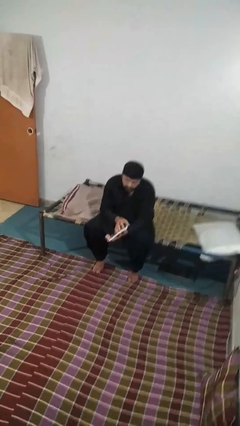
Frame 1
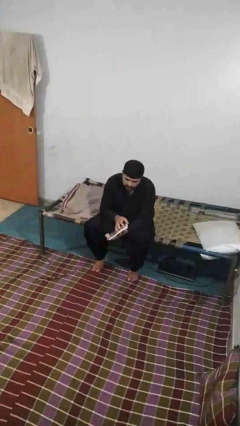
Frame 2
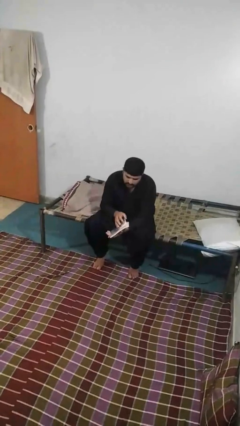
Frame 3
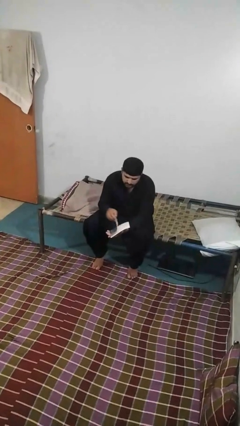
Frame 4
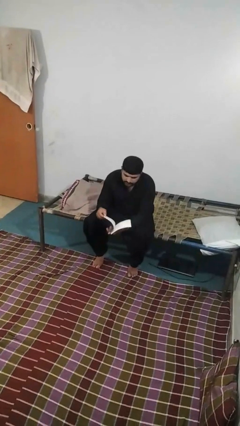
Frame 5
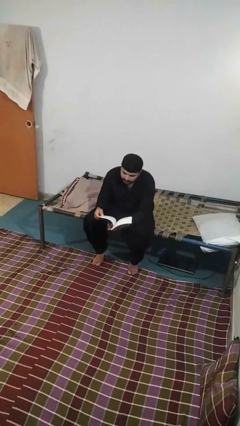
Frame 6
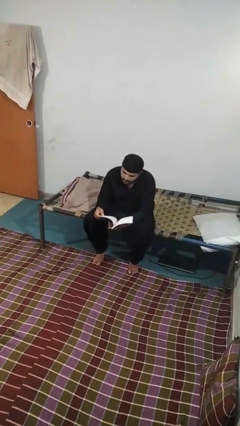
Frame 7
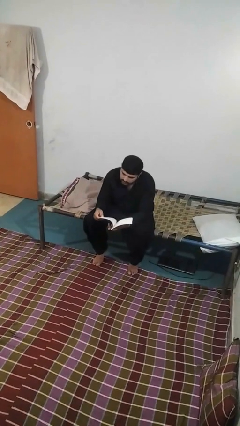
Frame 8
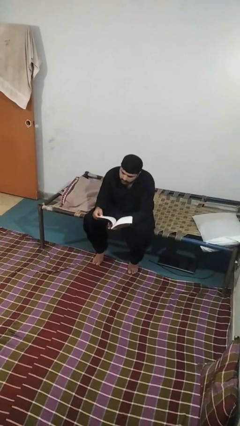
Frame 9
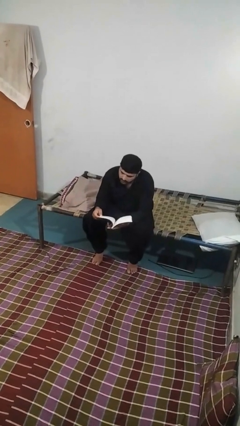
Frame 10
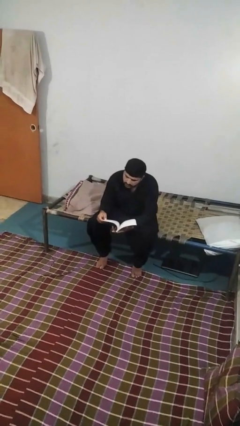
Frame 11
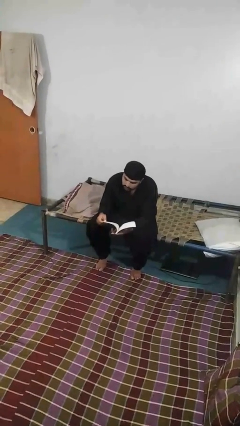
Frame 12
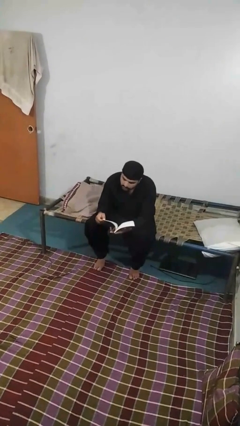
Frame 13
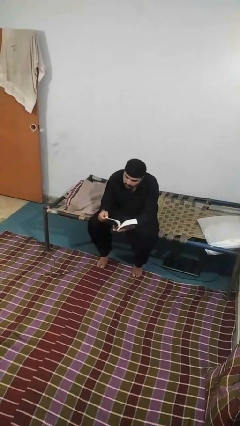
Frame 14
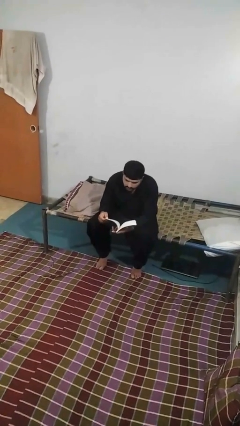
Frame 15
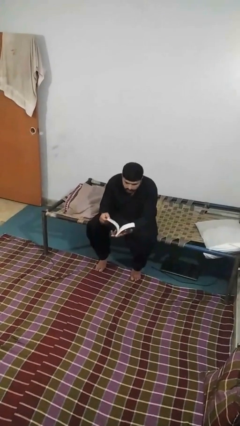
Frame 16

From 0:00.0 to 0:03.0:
person reads book

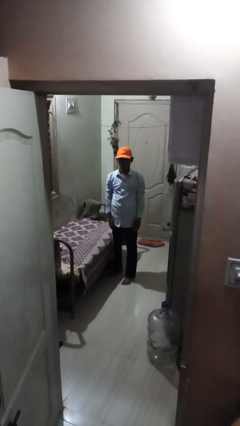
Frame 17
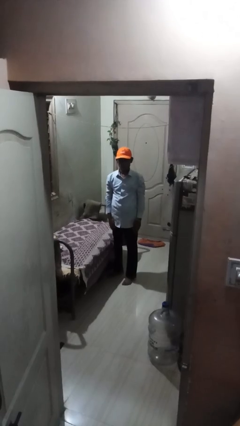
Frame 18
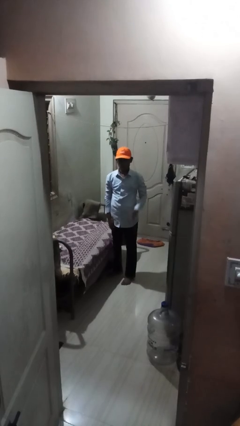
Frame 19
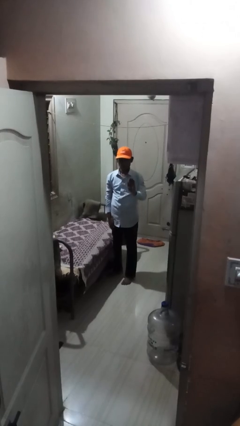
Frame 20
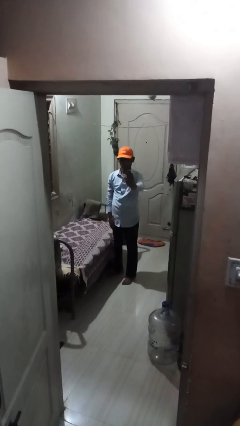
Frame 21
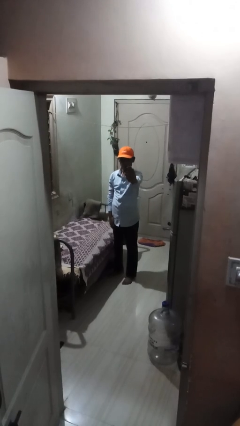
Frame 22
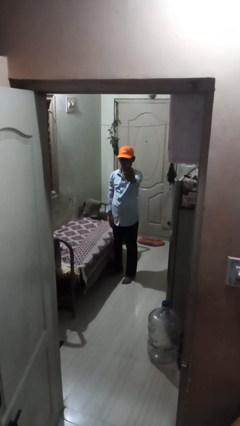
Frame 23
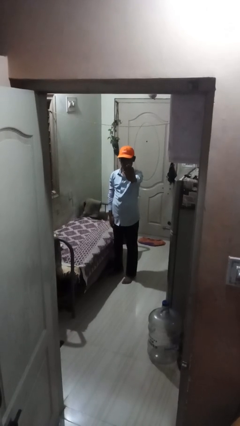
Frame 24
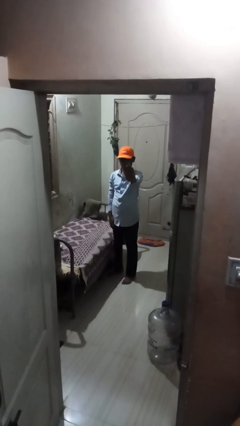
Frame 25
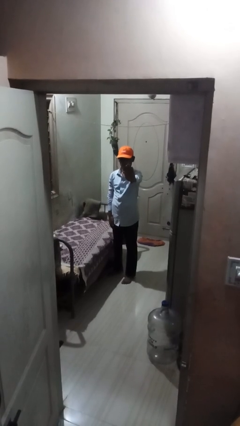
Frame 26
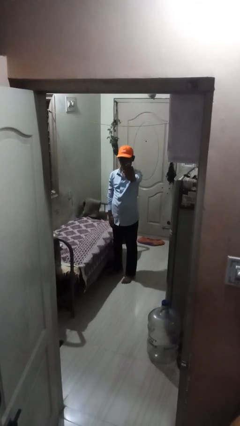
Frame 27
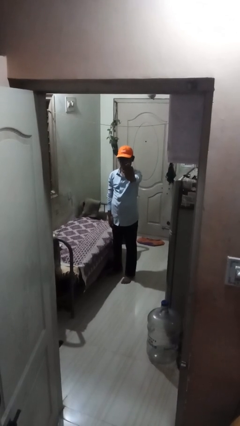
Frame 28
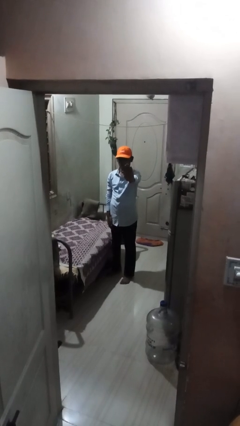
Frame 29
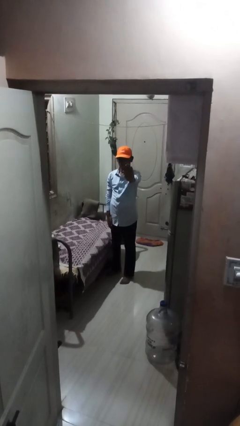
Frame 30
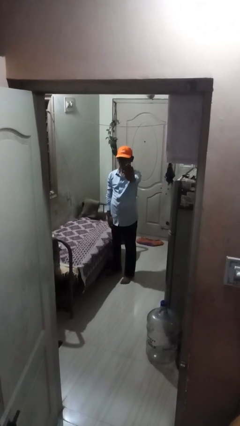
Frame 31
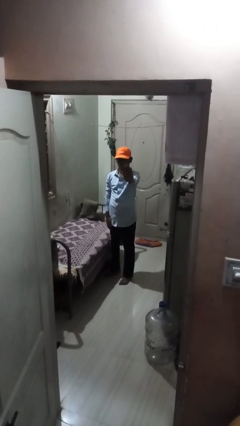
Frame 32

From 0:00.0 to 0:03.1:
person gestures stop

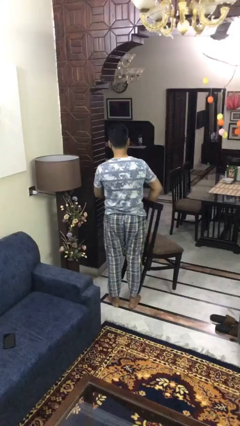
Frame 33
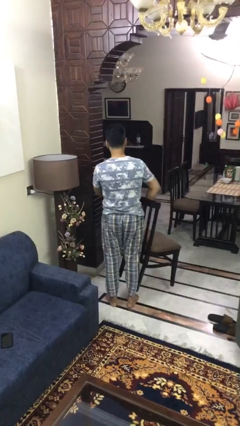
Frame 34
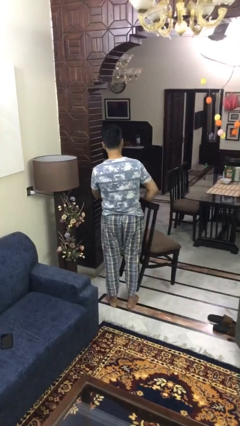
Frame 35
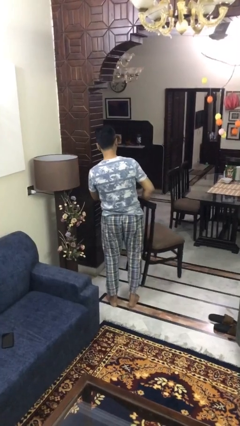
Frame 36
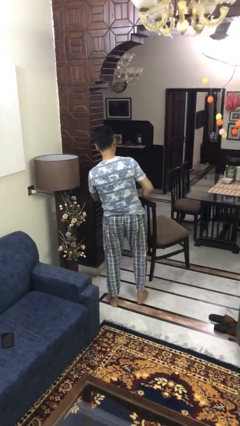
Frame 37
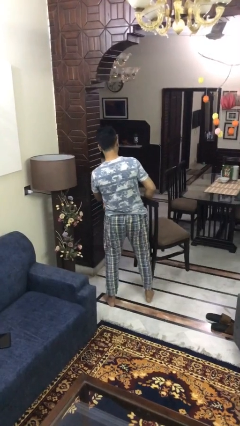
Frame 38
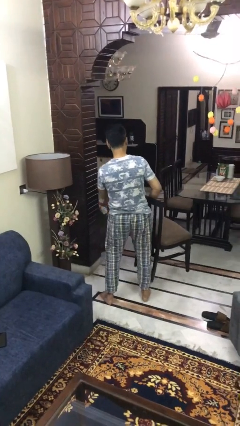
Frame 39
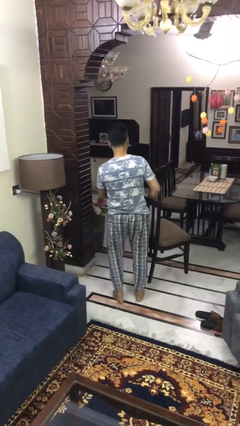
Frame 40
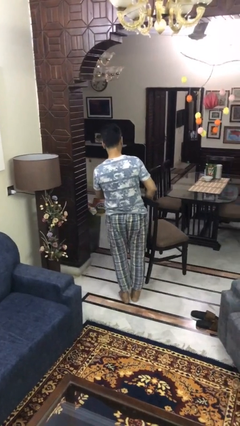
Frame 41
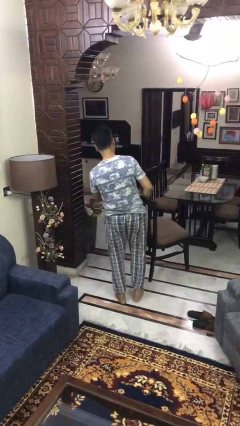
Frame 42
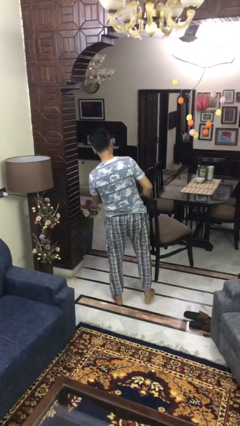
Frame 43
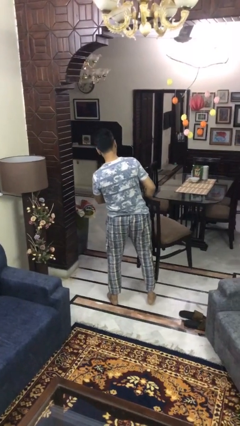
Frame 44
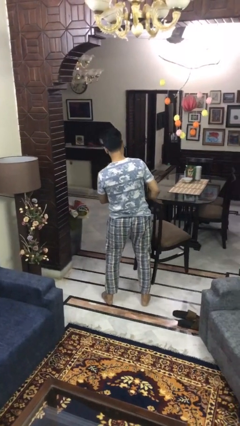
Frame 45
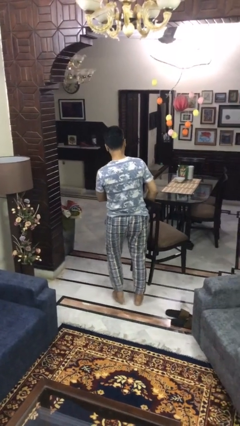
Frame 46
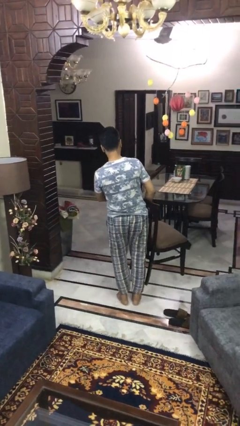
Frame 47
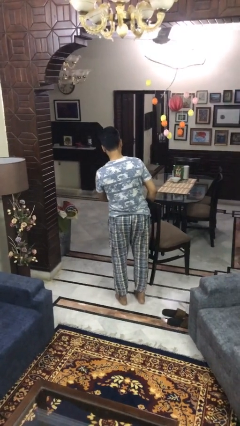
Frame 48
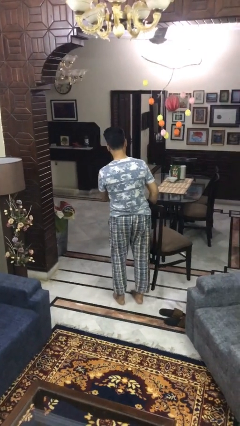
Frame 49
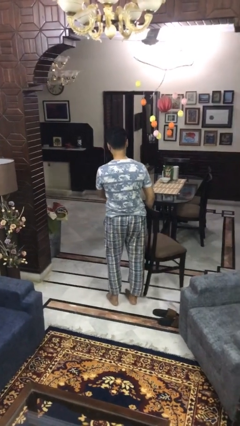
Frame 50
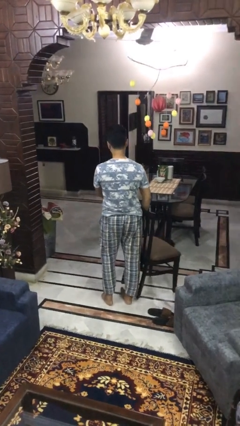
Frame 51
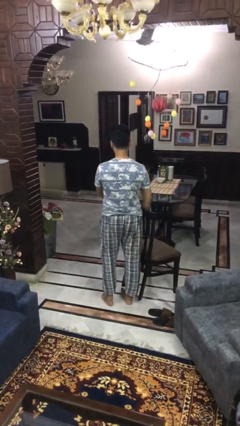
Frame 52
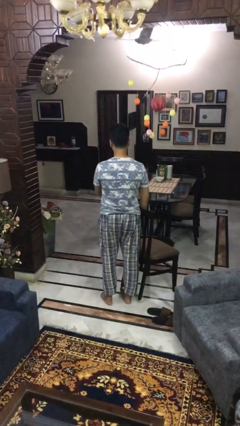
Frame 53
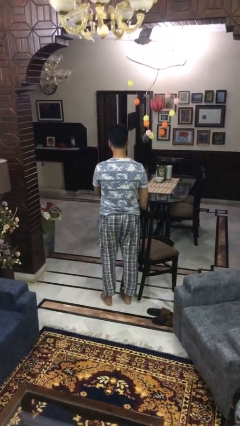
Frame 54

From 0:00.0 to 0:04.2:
person carries furniture

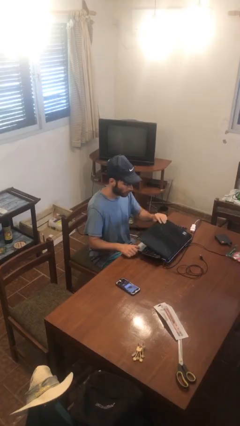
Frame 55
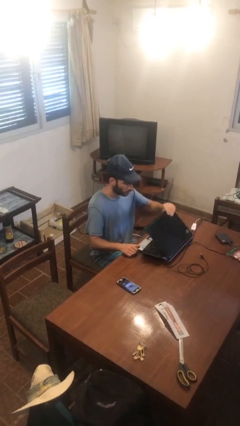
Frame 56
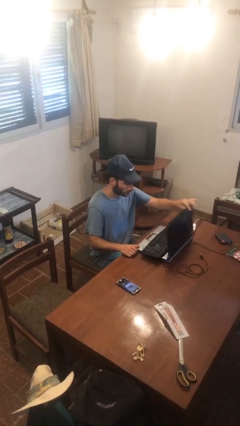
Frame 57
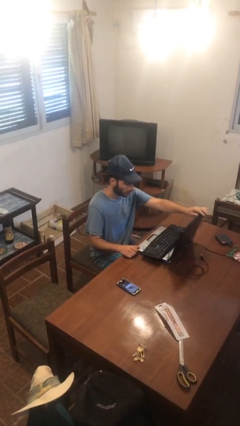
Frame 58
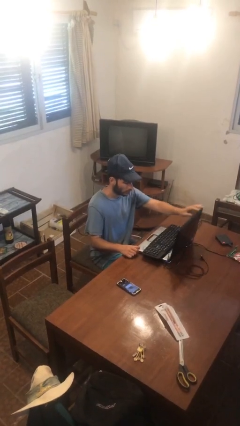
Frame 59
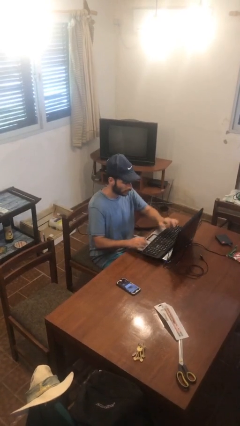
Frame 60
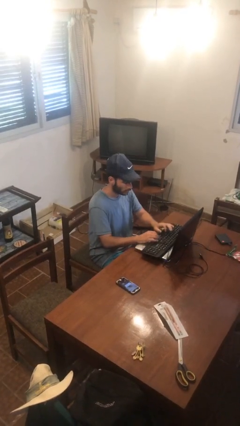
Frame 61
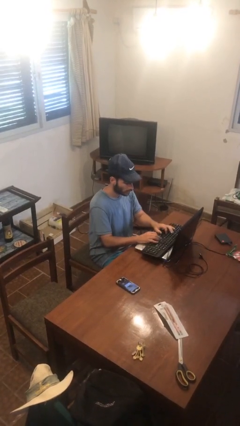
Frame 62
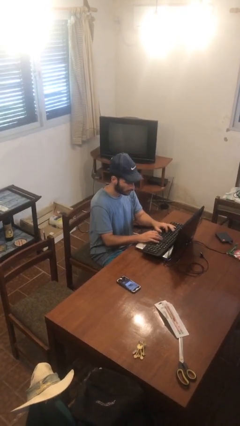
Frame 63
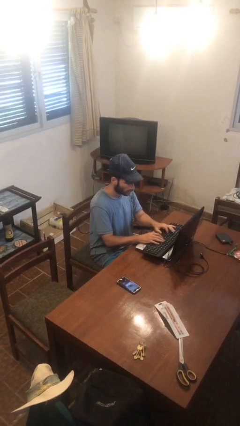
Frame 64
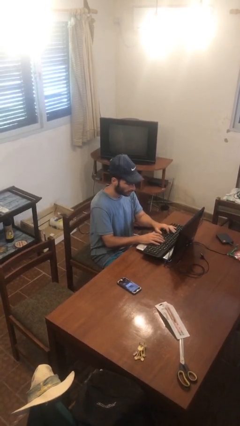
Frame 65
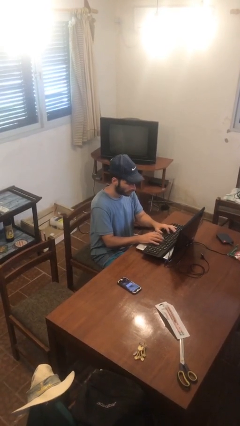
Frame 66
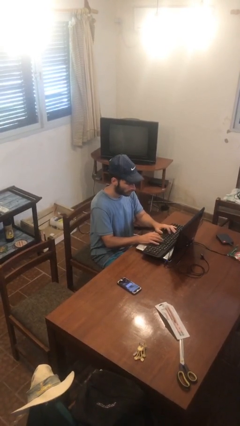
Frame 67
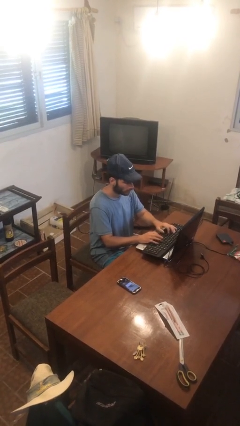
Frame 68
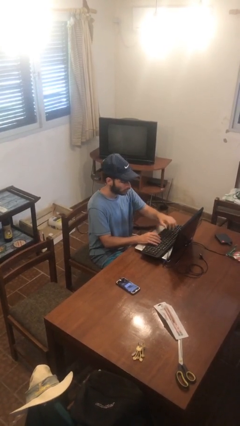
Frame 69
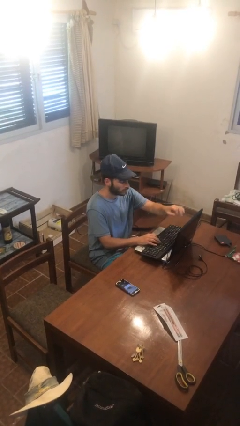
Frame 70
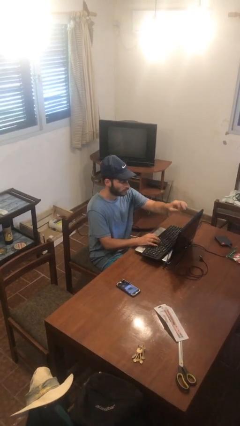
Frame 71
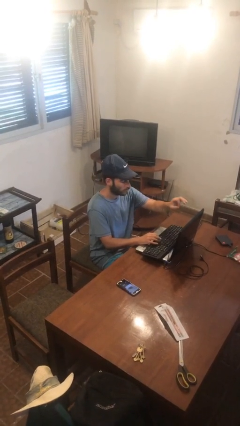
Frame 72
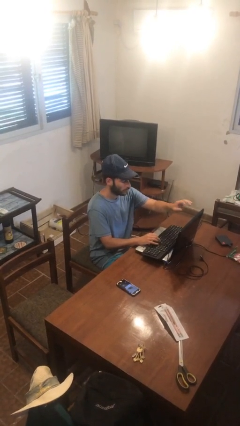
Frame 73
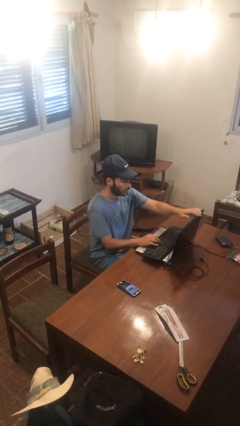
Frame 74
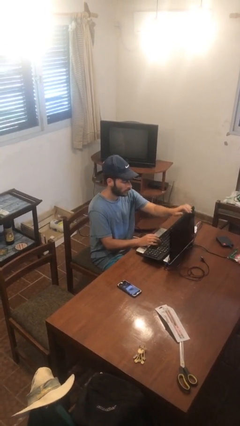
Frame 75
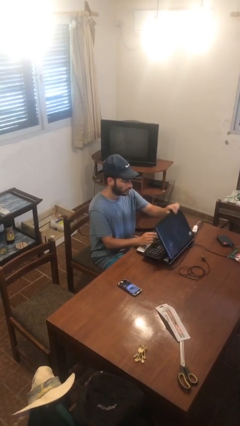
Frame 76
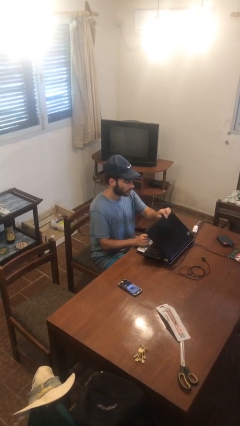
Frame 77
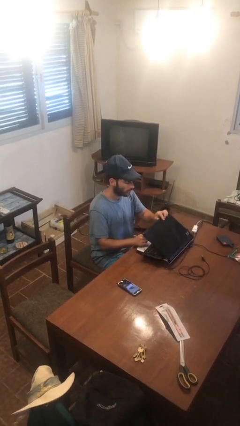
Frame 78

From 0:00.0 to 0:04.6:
person interacts with laptop

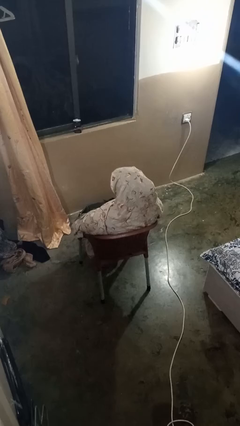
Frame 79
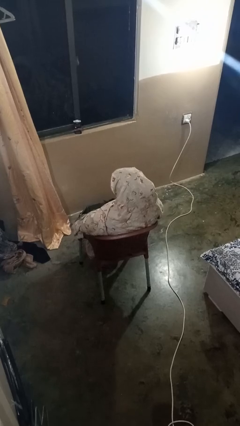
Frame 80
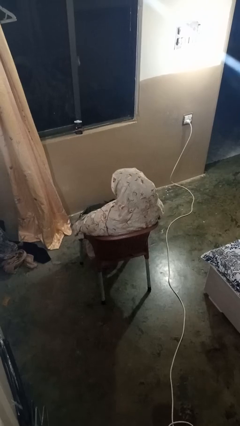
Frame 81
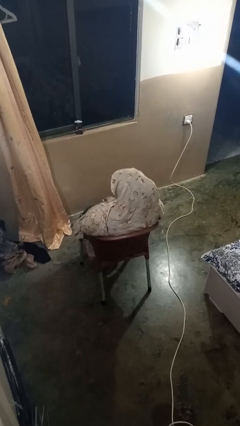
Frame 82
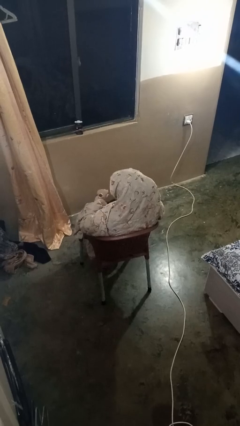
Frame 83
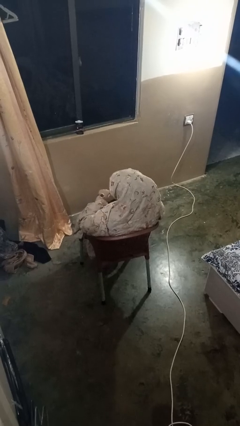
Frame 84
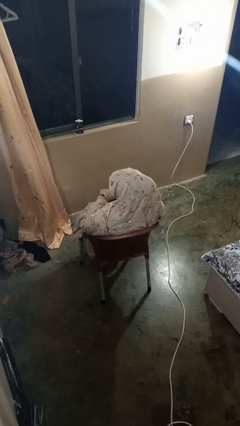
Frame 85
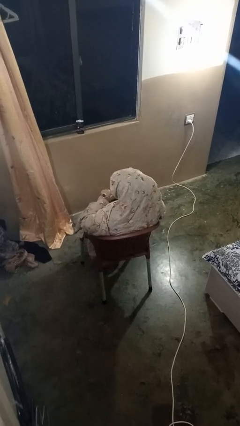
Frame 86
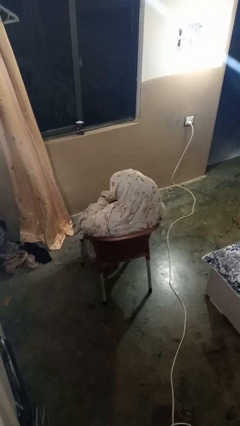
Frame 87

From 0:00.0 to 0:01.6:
person looks at wristwatch

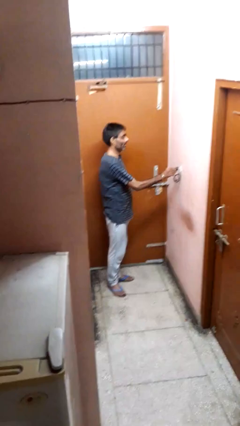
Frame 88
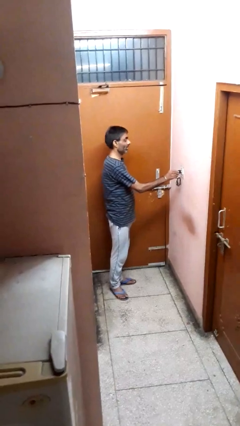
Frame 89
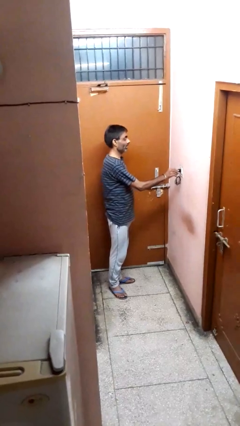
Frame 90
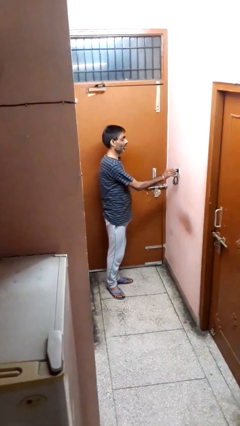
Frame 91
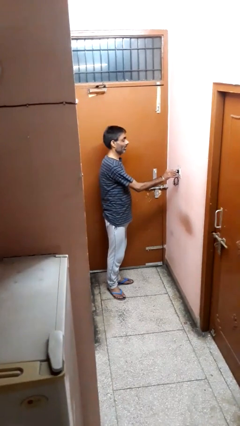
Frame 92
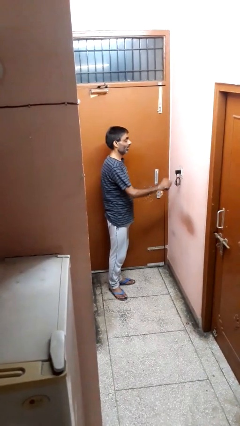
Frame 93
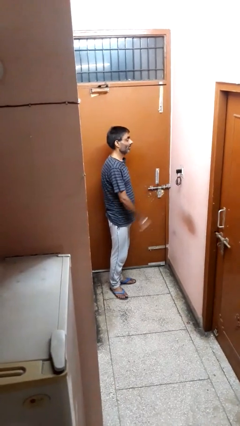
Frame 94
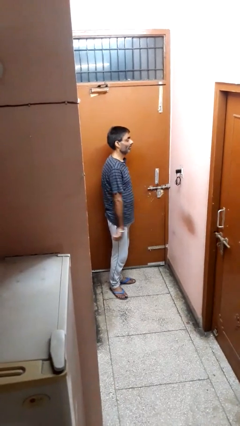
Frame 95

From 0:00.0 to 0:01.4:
person plugs into electrical socket
